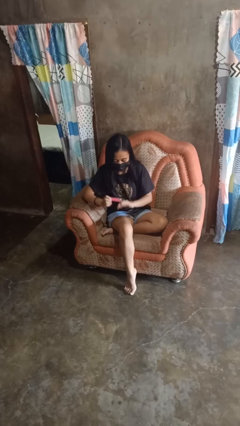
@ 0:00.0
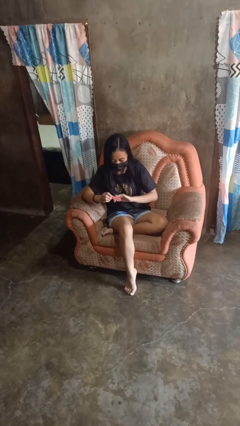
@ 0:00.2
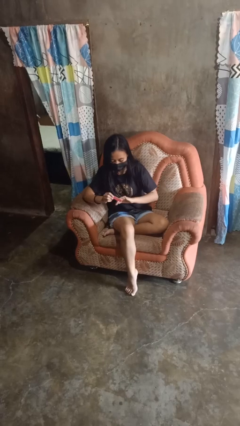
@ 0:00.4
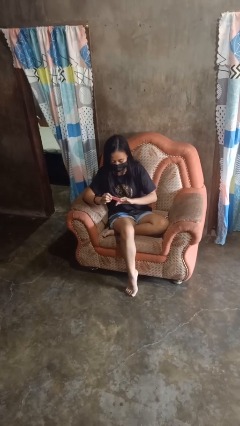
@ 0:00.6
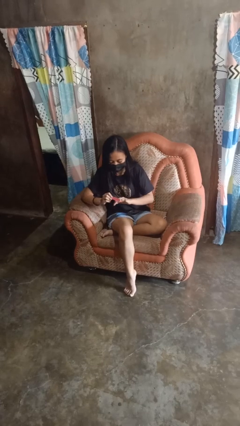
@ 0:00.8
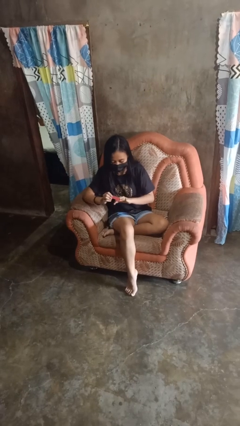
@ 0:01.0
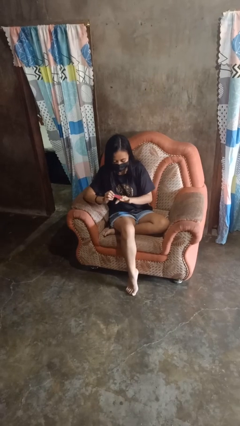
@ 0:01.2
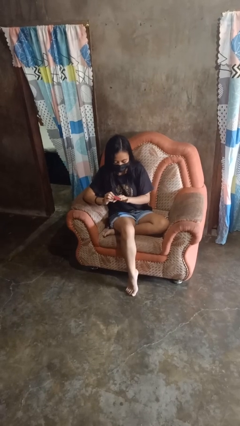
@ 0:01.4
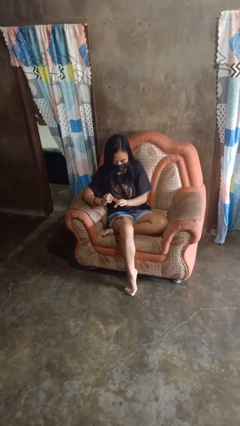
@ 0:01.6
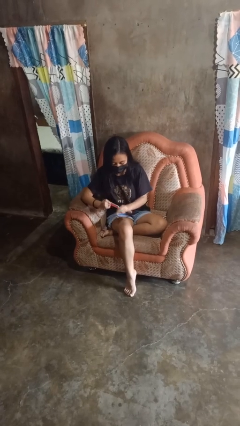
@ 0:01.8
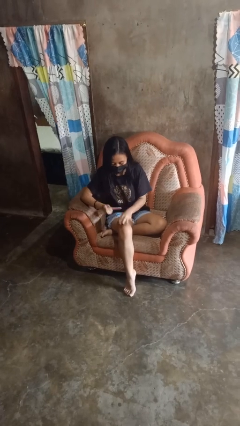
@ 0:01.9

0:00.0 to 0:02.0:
person files fingernails

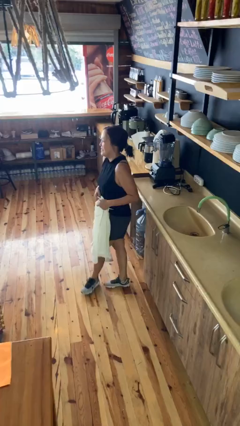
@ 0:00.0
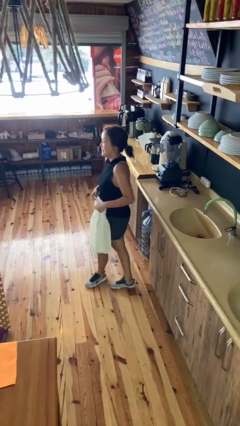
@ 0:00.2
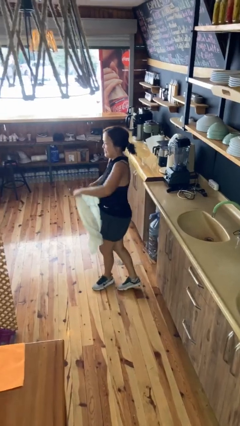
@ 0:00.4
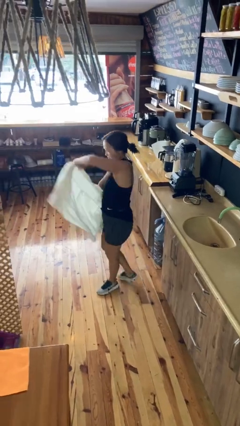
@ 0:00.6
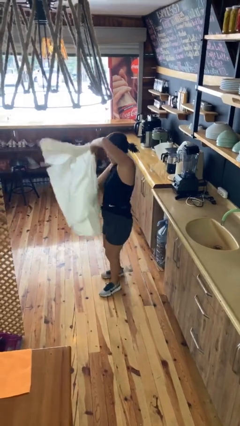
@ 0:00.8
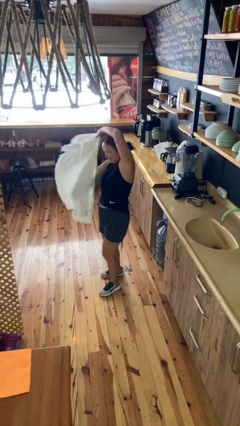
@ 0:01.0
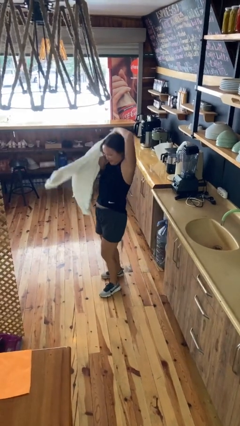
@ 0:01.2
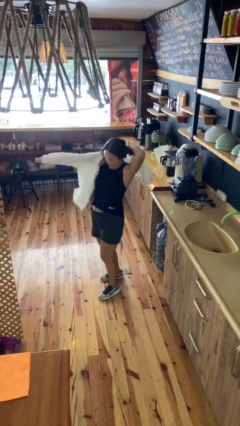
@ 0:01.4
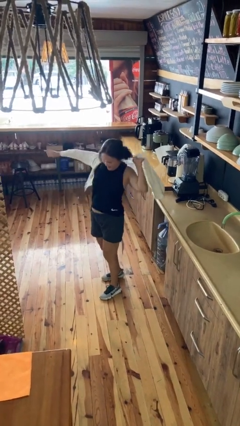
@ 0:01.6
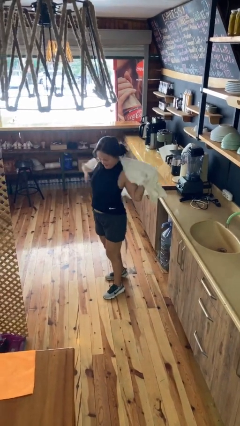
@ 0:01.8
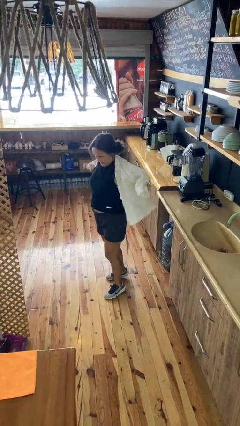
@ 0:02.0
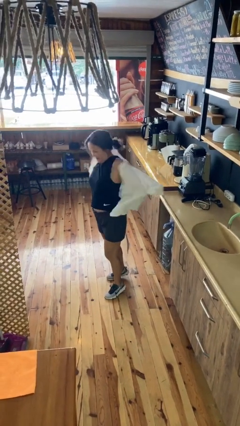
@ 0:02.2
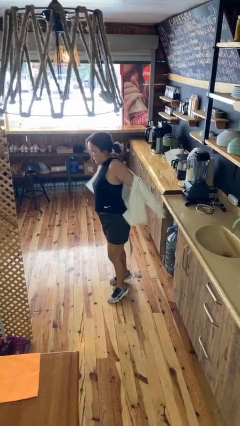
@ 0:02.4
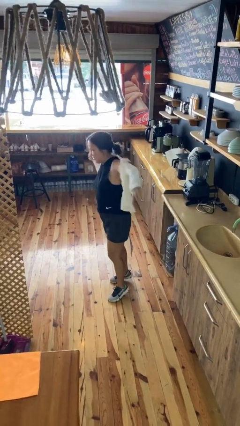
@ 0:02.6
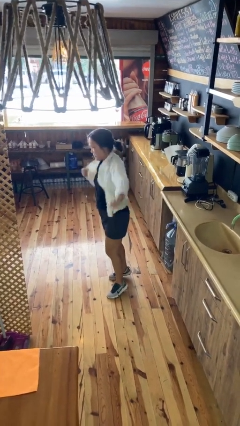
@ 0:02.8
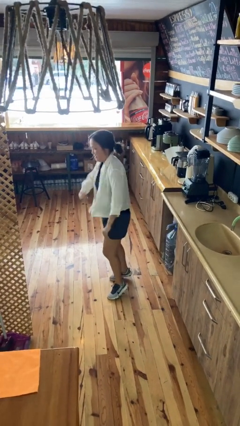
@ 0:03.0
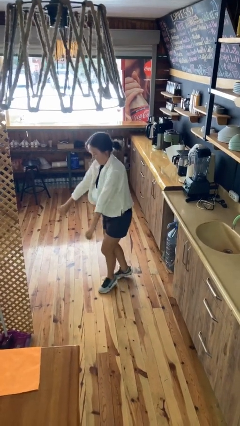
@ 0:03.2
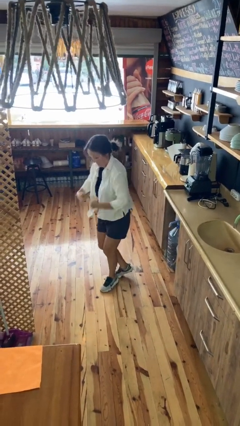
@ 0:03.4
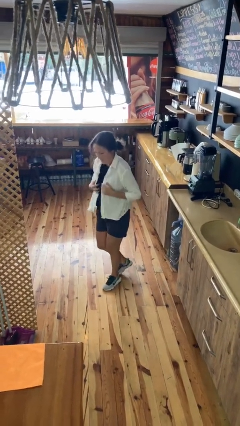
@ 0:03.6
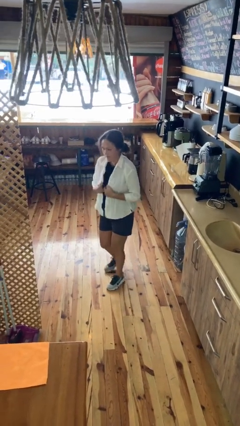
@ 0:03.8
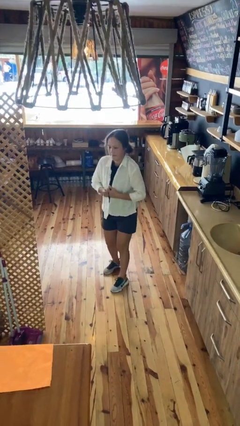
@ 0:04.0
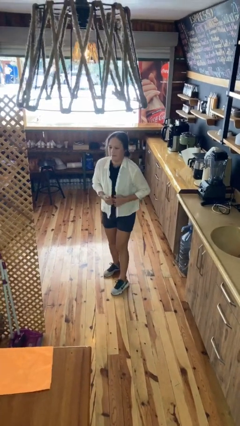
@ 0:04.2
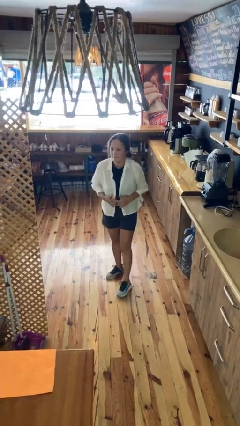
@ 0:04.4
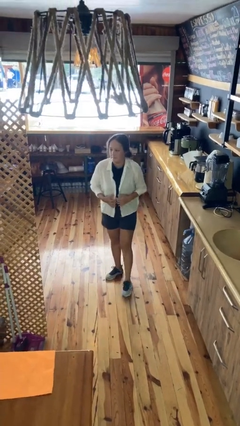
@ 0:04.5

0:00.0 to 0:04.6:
person puts on shirt

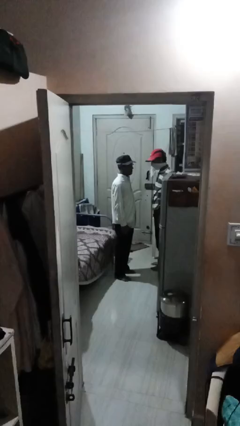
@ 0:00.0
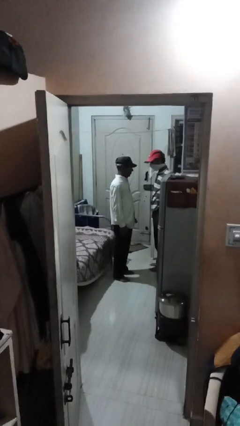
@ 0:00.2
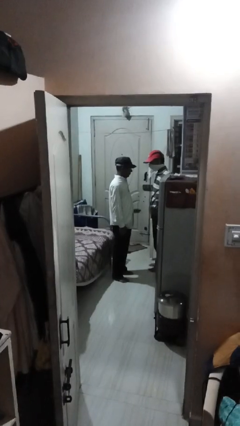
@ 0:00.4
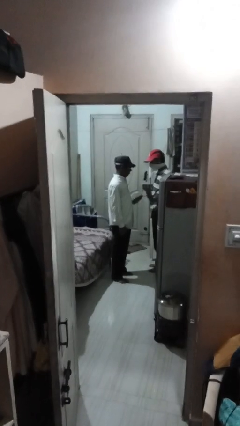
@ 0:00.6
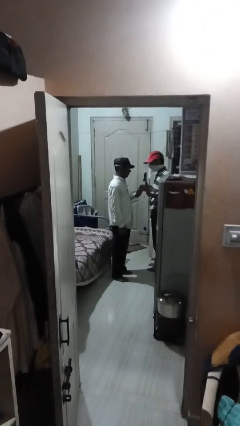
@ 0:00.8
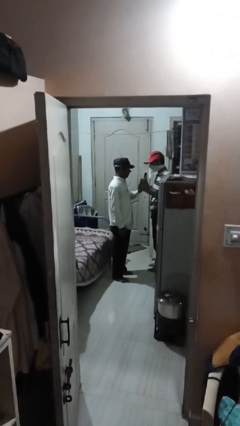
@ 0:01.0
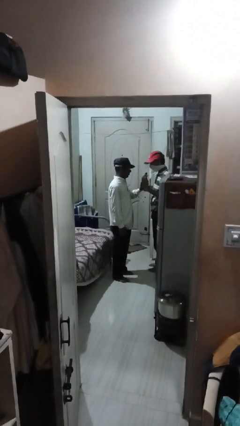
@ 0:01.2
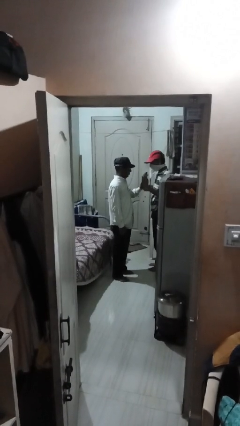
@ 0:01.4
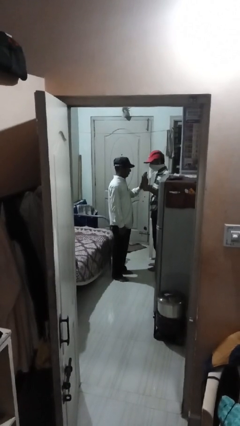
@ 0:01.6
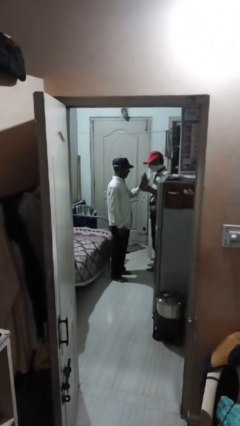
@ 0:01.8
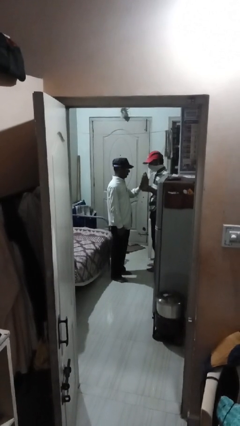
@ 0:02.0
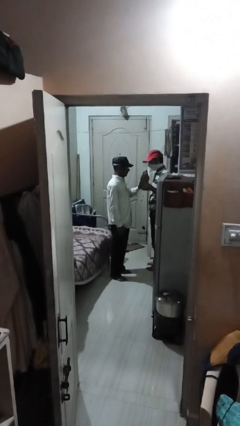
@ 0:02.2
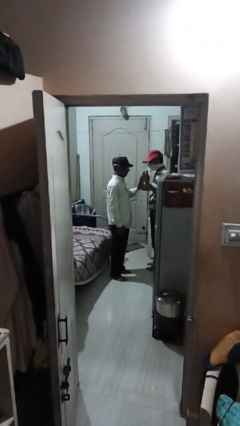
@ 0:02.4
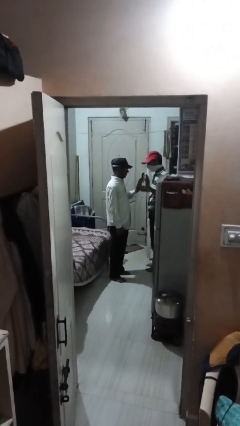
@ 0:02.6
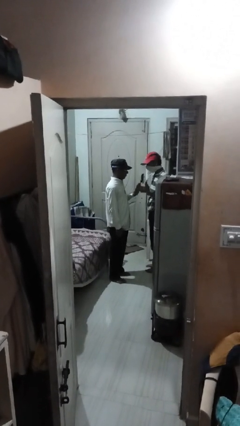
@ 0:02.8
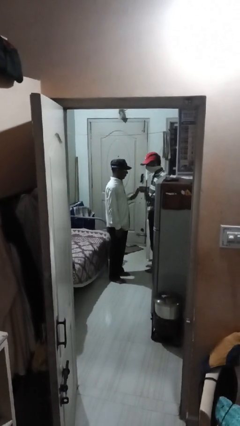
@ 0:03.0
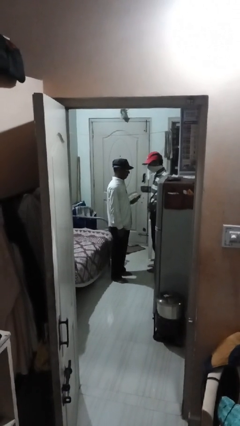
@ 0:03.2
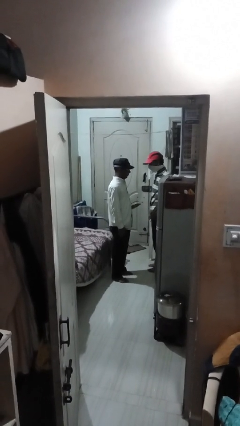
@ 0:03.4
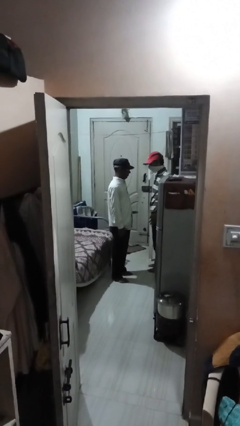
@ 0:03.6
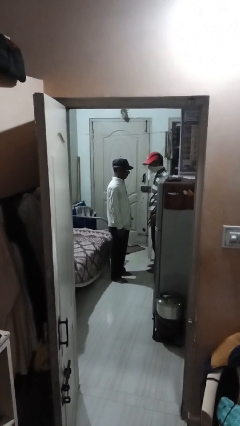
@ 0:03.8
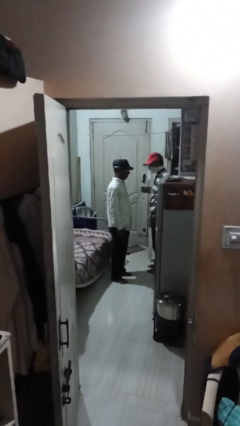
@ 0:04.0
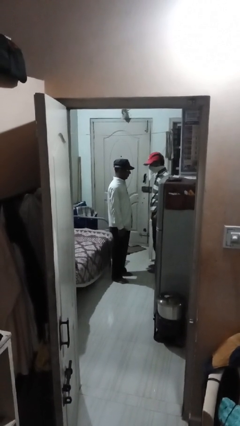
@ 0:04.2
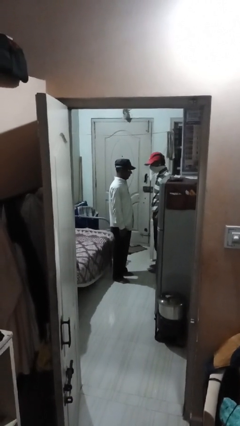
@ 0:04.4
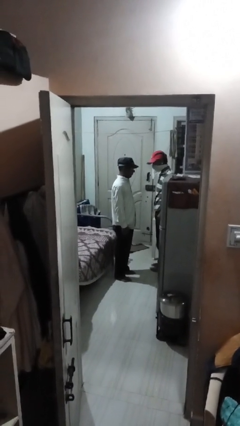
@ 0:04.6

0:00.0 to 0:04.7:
person highfives hand

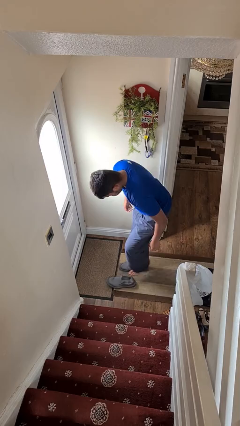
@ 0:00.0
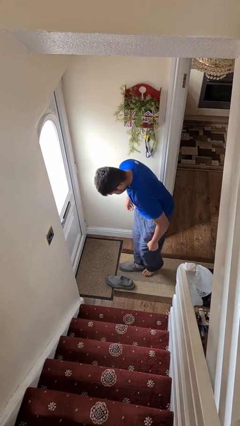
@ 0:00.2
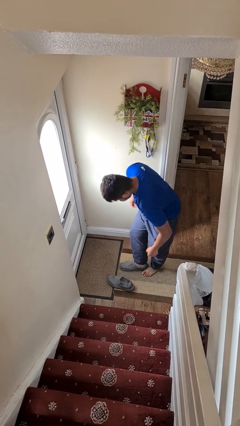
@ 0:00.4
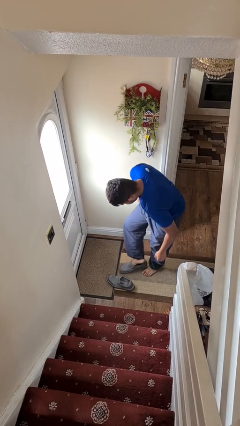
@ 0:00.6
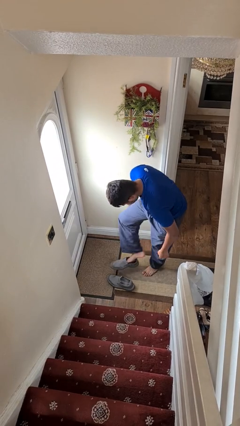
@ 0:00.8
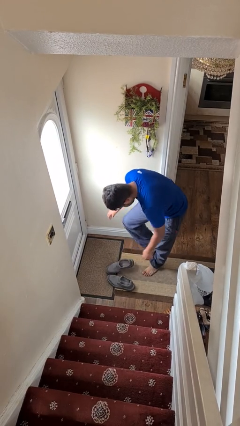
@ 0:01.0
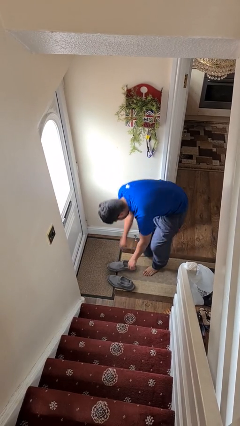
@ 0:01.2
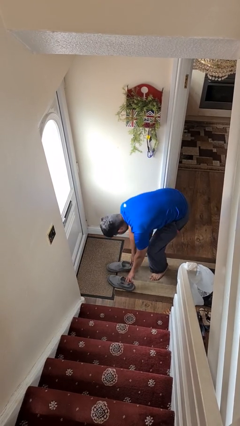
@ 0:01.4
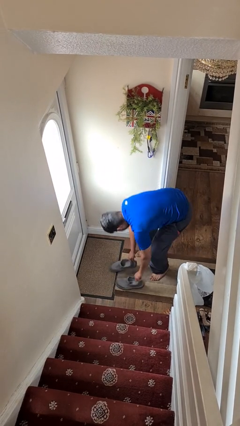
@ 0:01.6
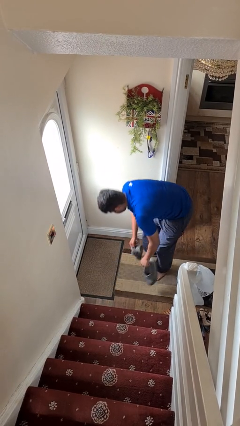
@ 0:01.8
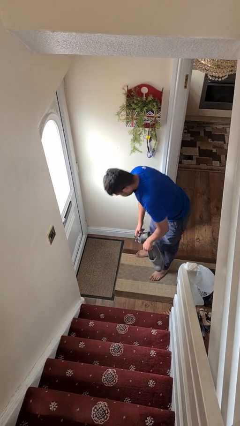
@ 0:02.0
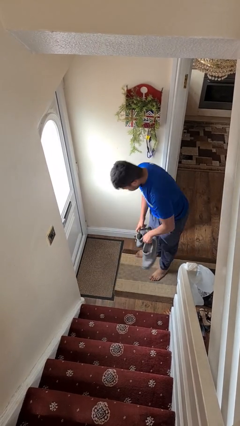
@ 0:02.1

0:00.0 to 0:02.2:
person takes off shoes

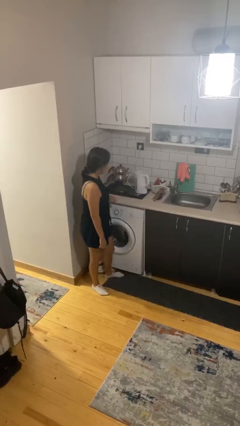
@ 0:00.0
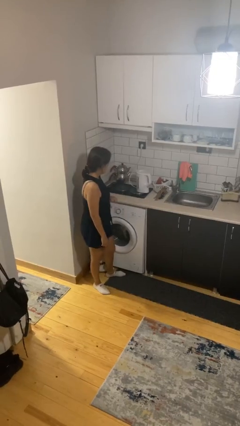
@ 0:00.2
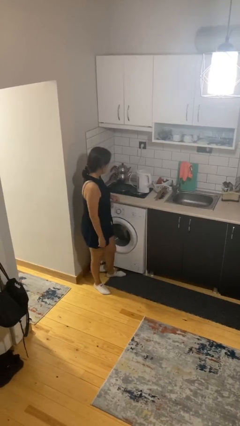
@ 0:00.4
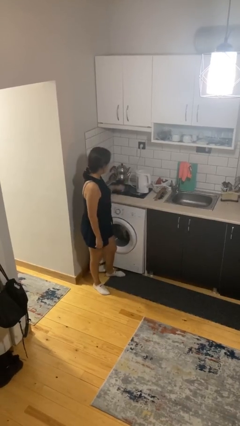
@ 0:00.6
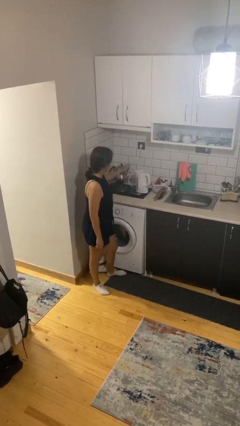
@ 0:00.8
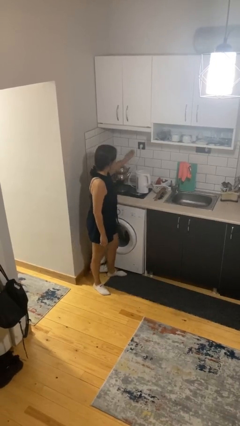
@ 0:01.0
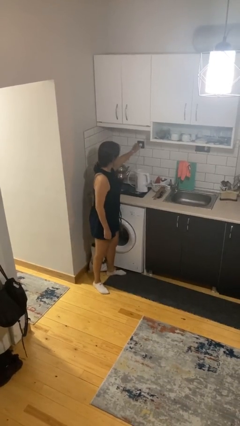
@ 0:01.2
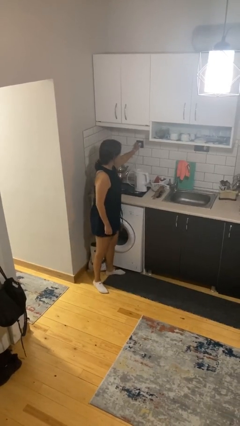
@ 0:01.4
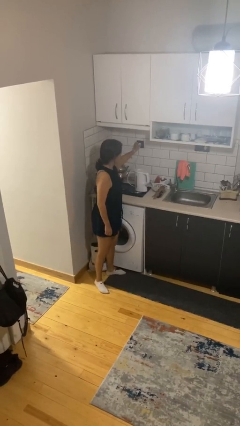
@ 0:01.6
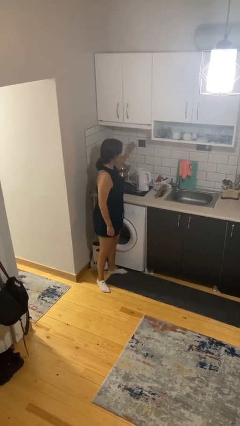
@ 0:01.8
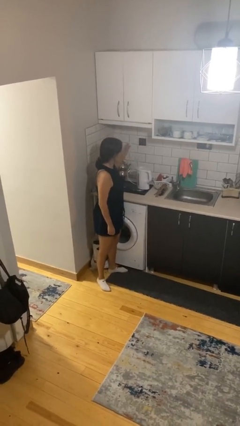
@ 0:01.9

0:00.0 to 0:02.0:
person unplugs from electrical socket

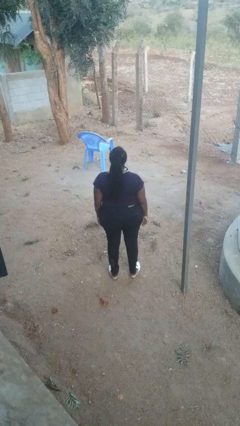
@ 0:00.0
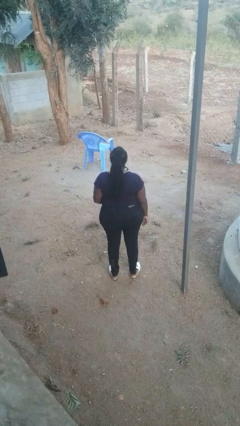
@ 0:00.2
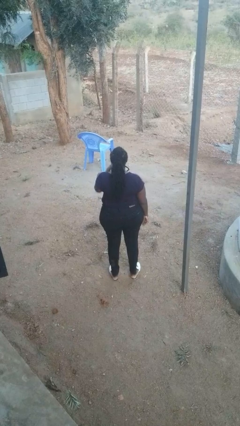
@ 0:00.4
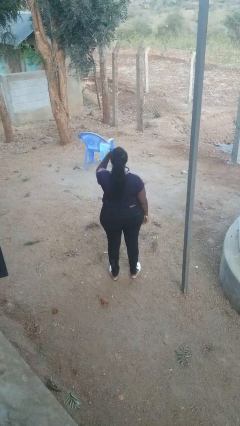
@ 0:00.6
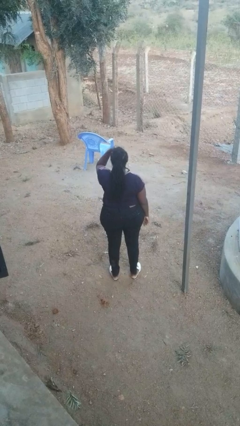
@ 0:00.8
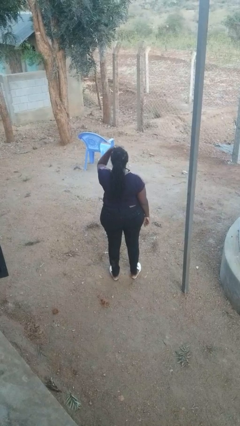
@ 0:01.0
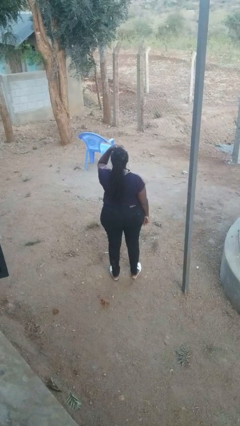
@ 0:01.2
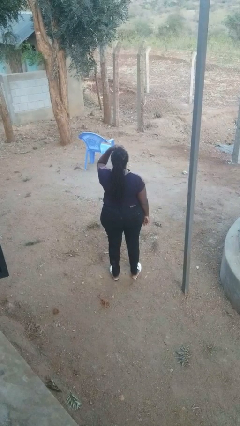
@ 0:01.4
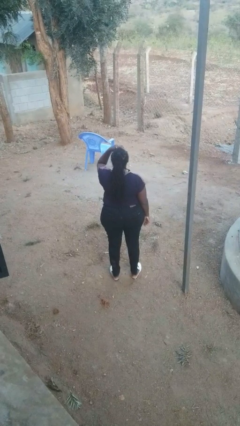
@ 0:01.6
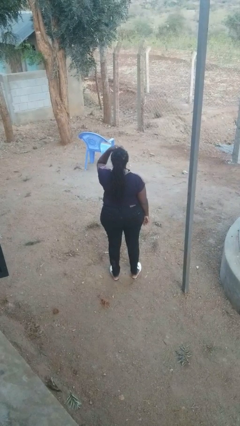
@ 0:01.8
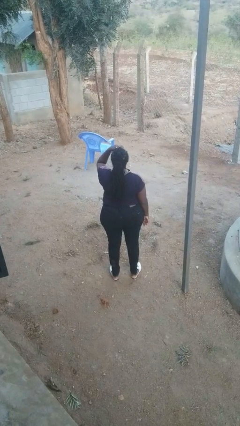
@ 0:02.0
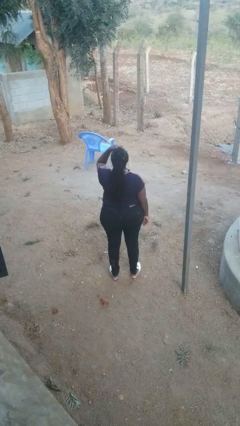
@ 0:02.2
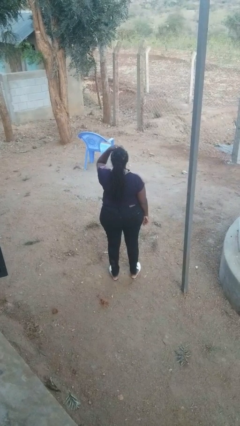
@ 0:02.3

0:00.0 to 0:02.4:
person shades eyes
